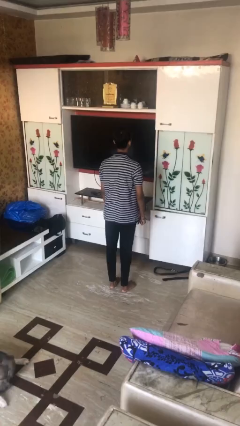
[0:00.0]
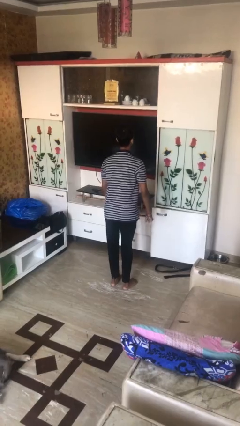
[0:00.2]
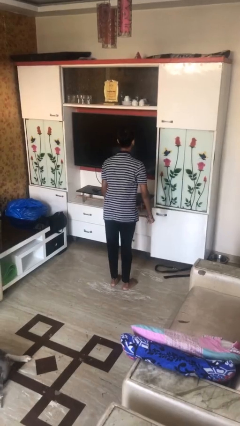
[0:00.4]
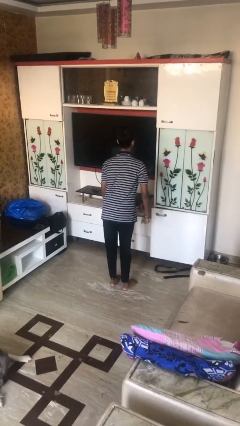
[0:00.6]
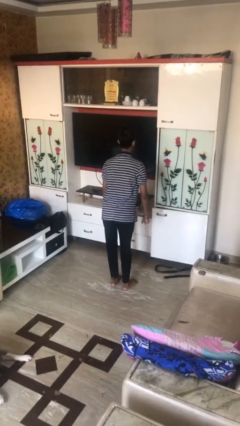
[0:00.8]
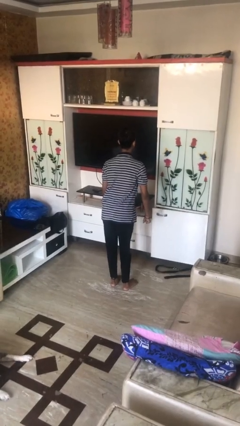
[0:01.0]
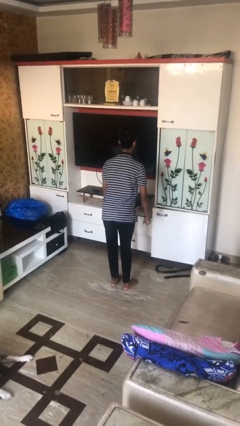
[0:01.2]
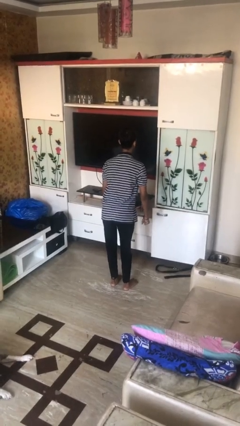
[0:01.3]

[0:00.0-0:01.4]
person wiggles hips

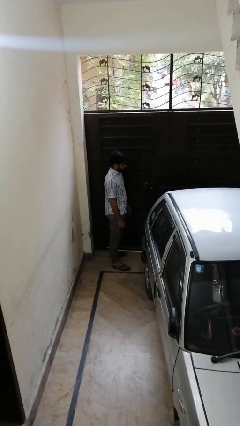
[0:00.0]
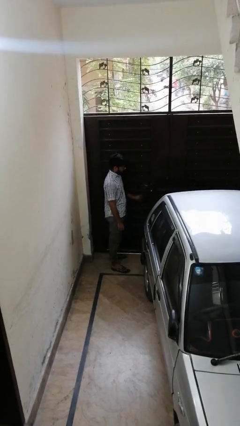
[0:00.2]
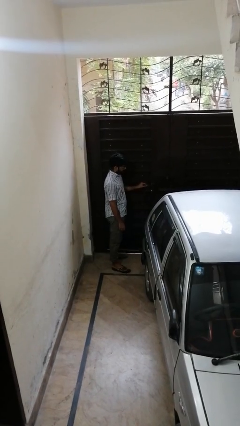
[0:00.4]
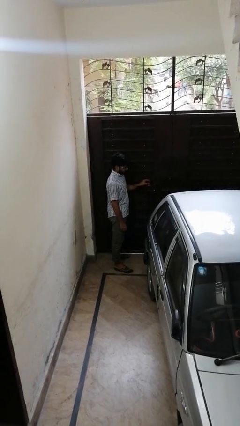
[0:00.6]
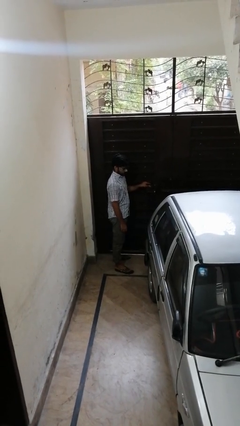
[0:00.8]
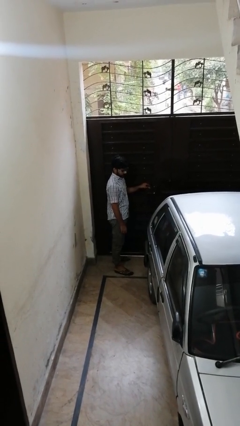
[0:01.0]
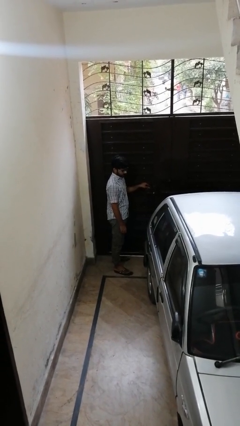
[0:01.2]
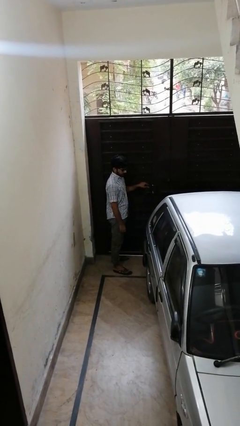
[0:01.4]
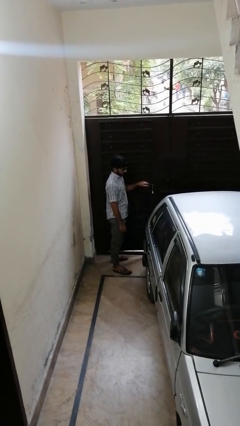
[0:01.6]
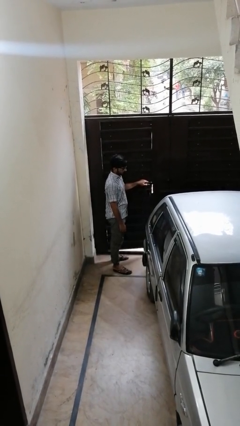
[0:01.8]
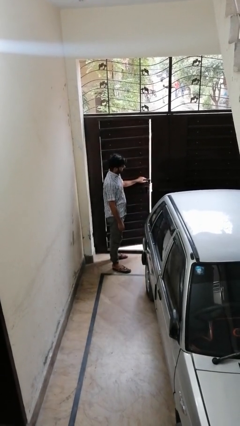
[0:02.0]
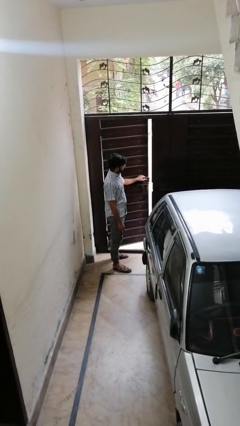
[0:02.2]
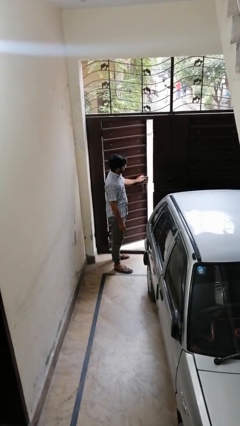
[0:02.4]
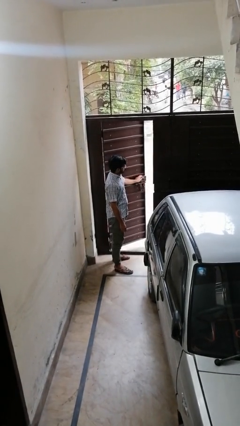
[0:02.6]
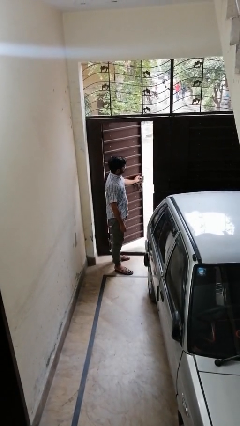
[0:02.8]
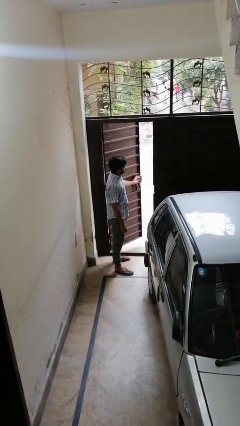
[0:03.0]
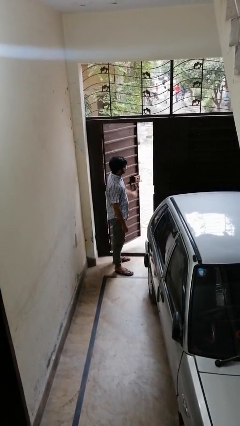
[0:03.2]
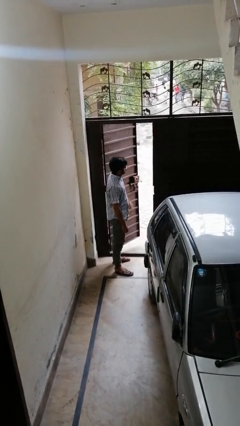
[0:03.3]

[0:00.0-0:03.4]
person opens gate

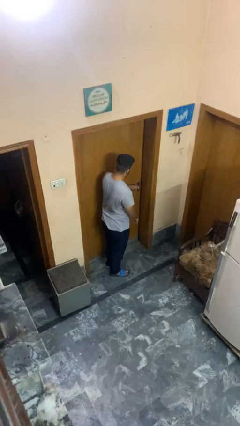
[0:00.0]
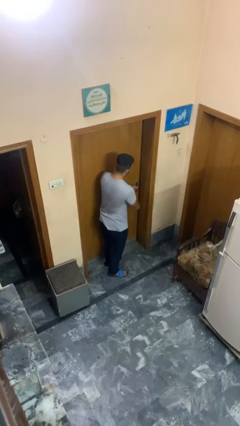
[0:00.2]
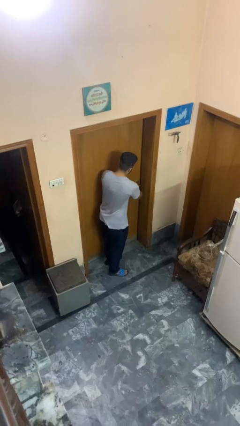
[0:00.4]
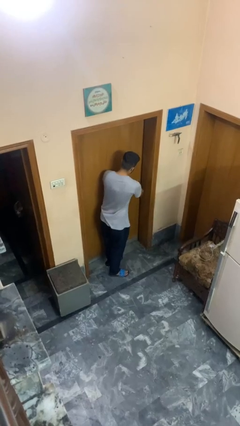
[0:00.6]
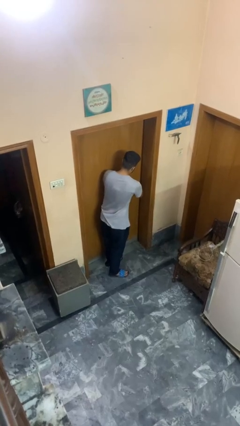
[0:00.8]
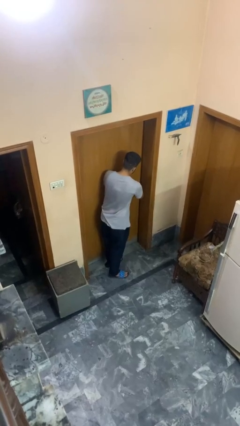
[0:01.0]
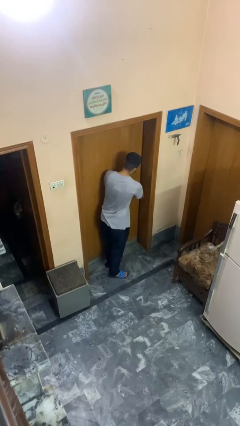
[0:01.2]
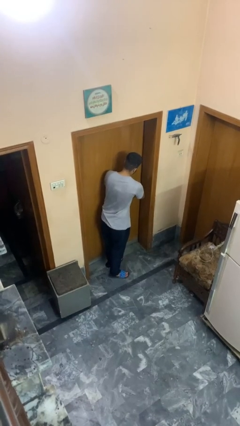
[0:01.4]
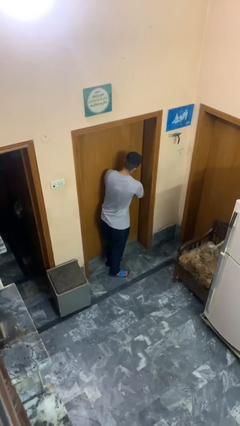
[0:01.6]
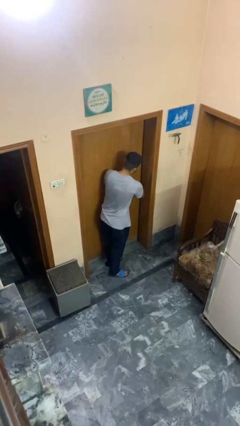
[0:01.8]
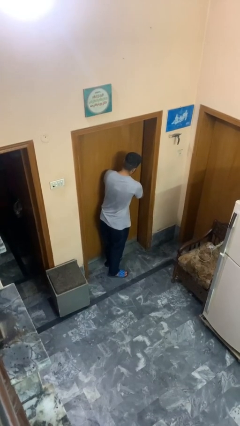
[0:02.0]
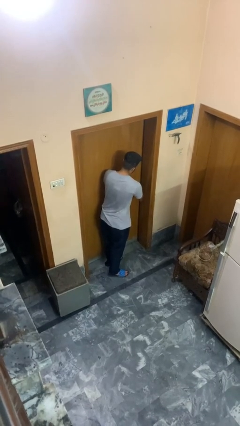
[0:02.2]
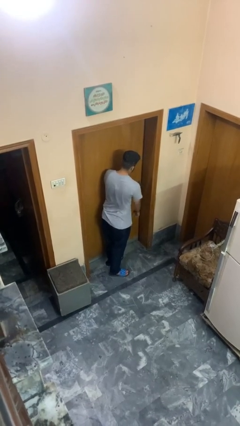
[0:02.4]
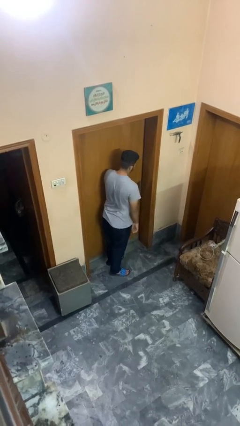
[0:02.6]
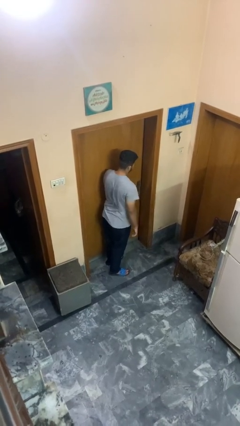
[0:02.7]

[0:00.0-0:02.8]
person locks door with keys

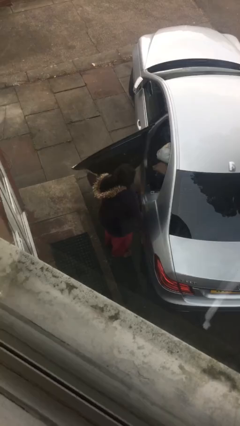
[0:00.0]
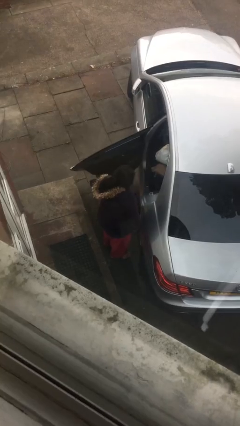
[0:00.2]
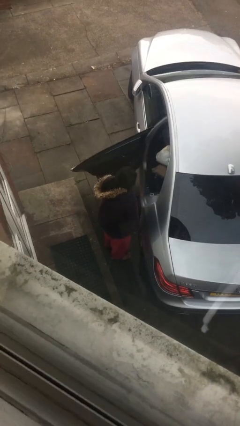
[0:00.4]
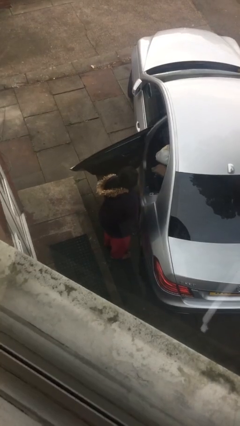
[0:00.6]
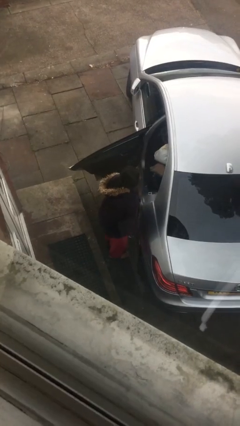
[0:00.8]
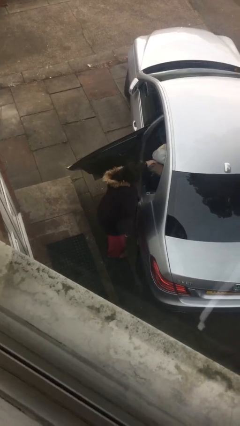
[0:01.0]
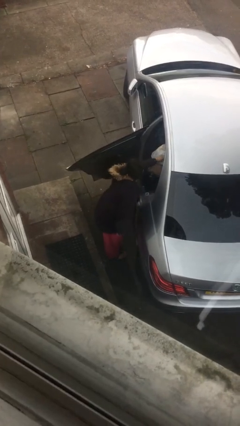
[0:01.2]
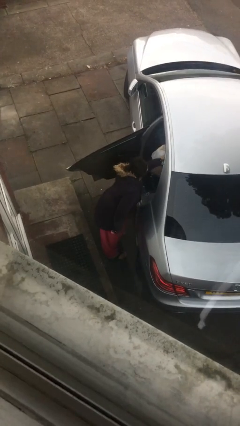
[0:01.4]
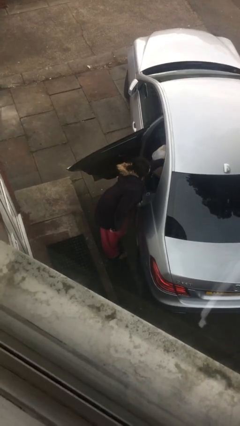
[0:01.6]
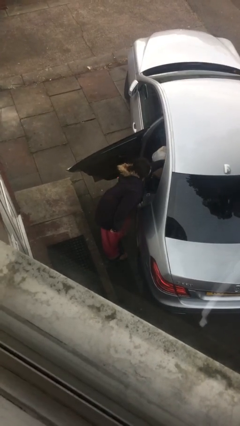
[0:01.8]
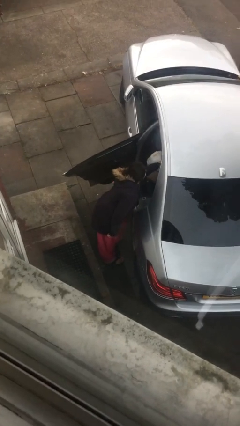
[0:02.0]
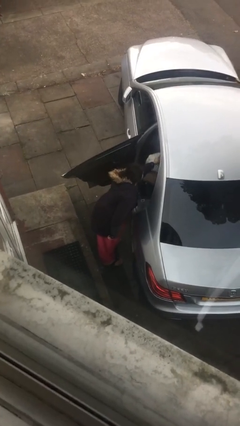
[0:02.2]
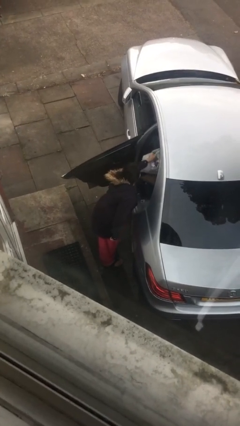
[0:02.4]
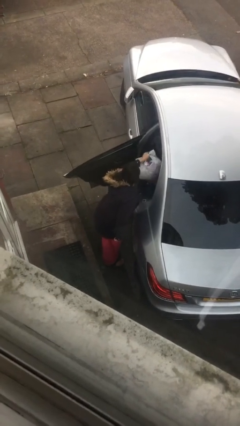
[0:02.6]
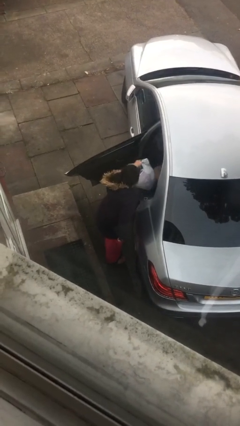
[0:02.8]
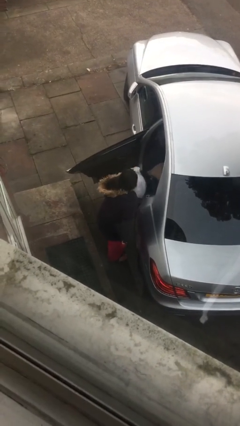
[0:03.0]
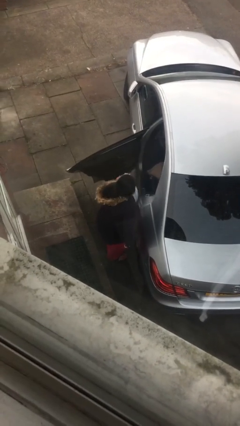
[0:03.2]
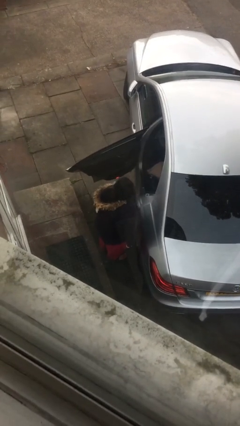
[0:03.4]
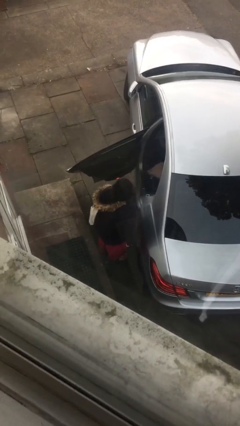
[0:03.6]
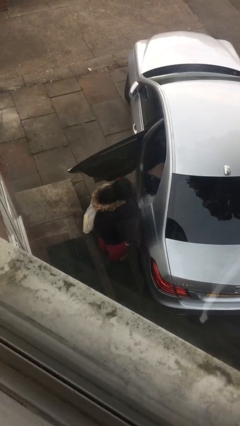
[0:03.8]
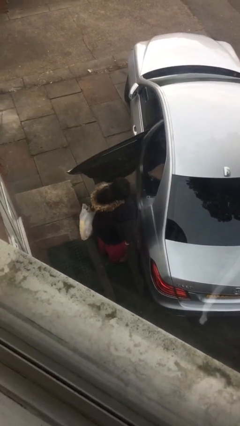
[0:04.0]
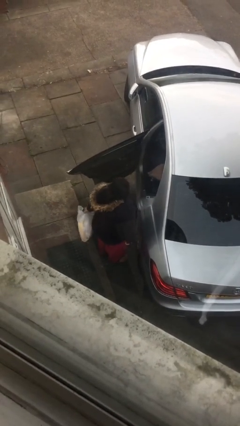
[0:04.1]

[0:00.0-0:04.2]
person unloads car

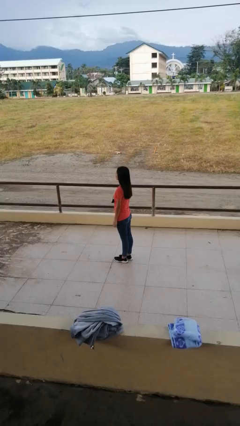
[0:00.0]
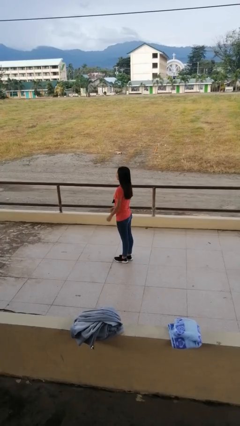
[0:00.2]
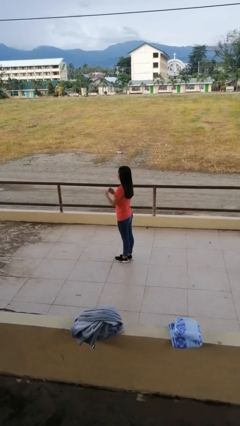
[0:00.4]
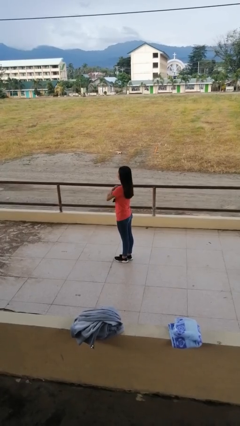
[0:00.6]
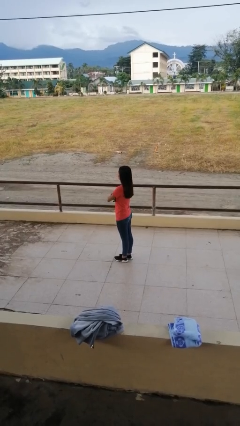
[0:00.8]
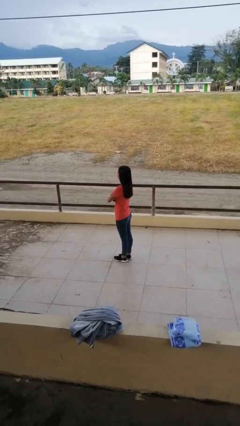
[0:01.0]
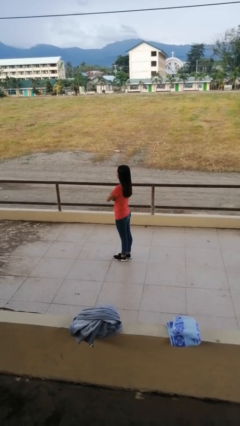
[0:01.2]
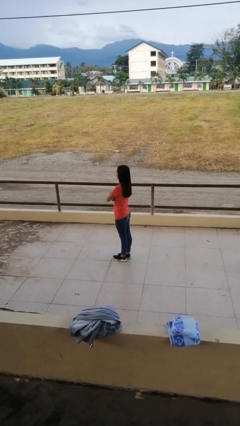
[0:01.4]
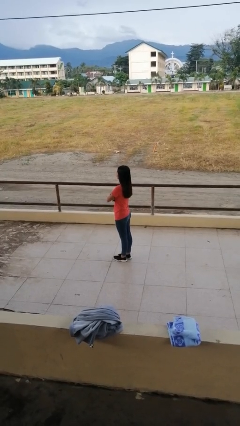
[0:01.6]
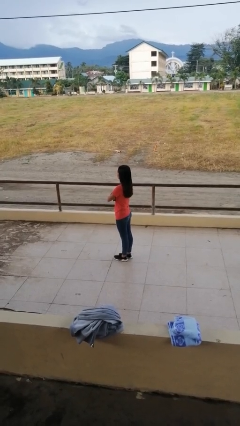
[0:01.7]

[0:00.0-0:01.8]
person crosses arms

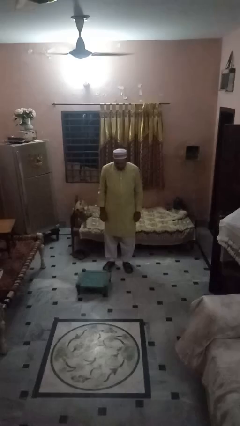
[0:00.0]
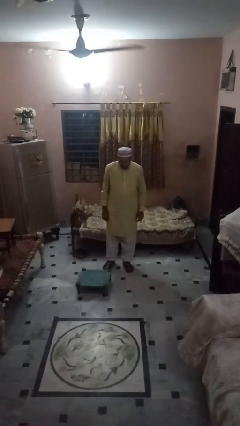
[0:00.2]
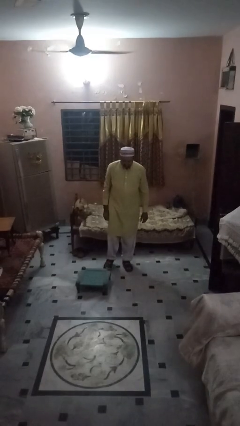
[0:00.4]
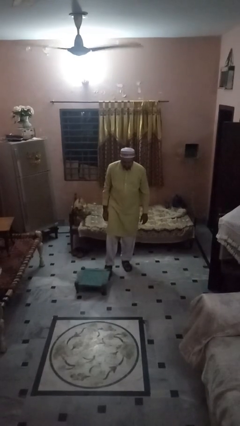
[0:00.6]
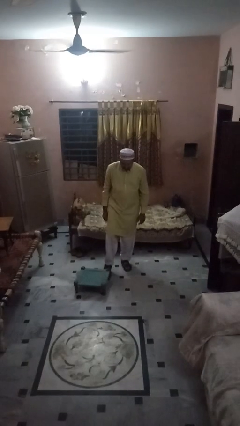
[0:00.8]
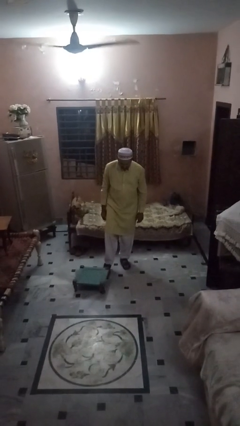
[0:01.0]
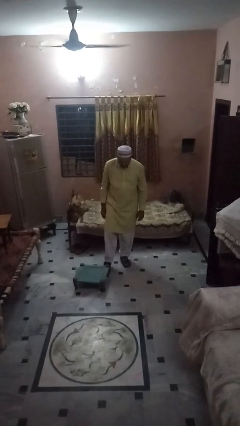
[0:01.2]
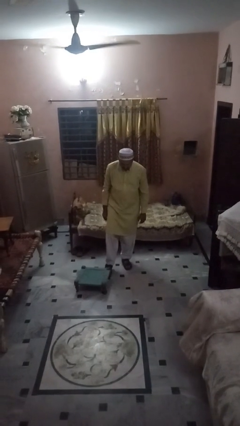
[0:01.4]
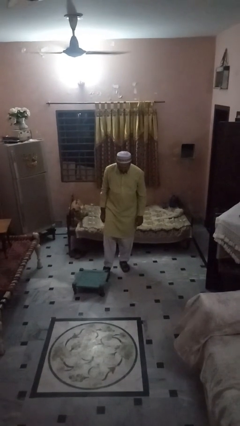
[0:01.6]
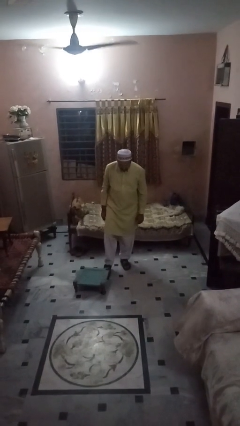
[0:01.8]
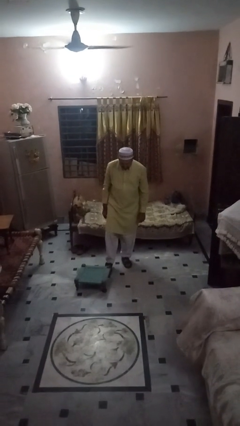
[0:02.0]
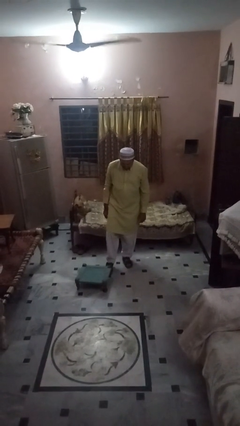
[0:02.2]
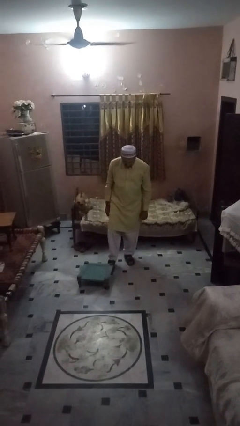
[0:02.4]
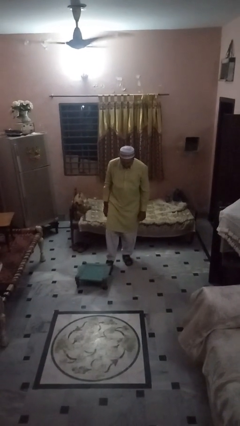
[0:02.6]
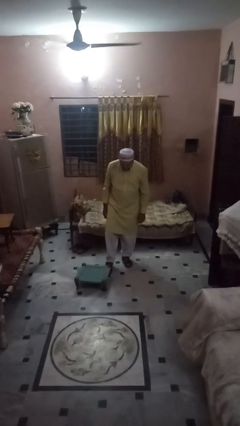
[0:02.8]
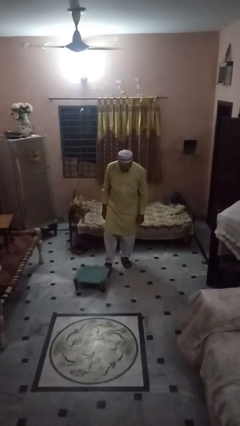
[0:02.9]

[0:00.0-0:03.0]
person trips on object on floor

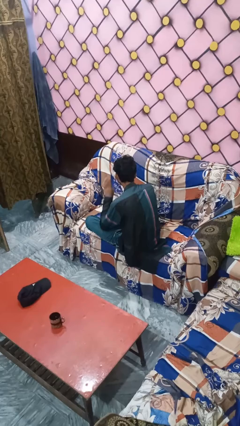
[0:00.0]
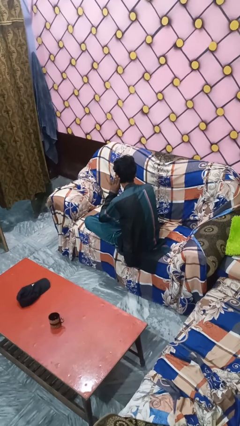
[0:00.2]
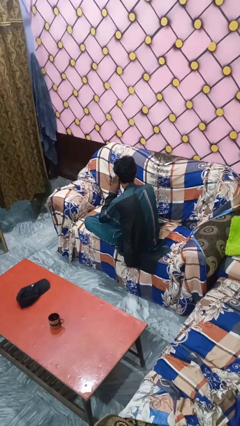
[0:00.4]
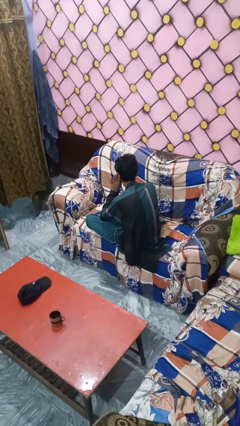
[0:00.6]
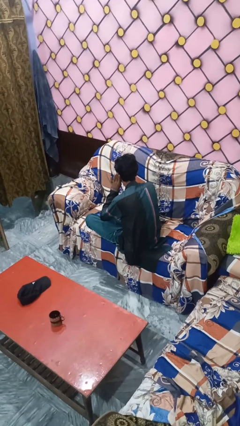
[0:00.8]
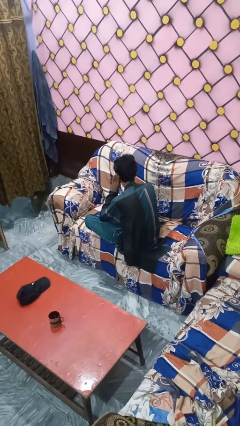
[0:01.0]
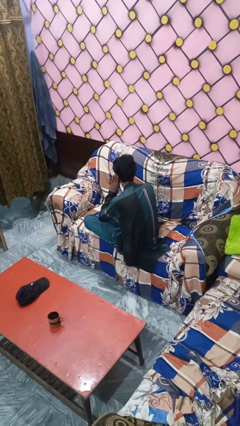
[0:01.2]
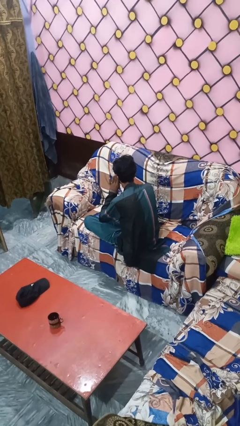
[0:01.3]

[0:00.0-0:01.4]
person gestures listen closely
